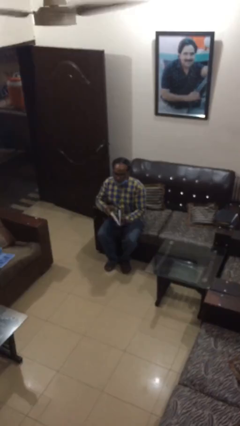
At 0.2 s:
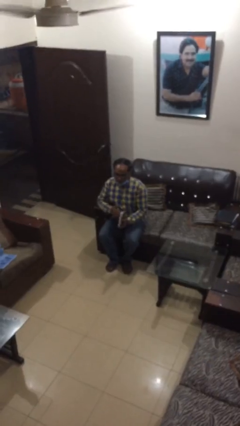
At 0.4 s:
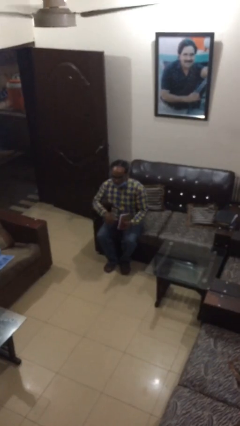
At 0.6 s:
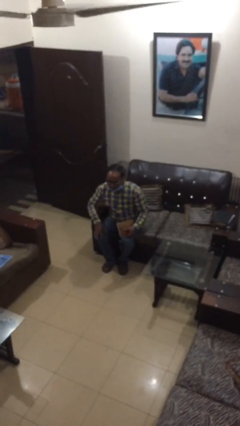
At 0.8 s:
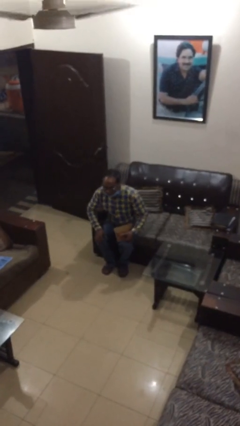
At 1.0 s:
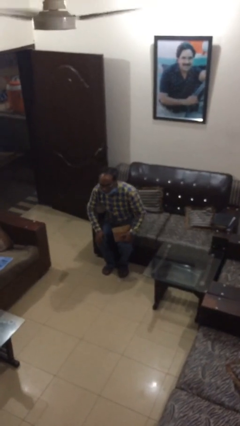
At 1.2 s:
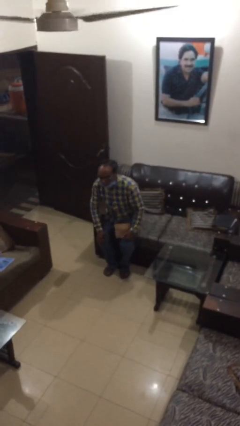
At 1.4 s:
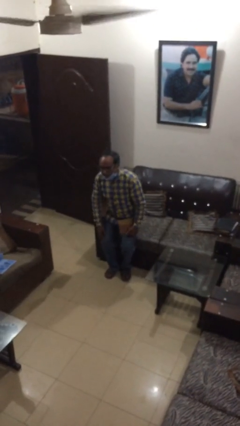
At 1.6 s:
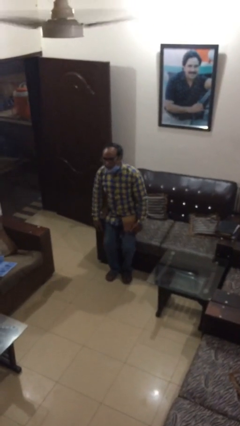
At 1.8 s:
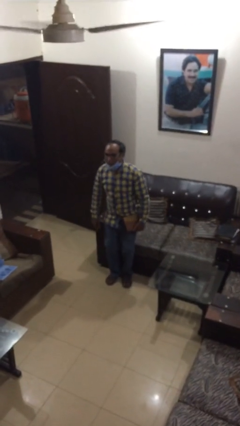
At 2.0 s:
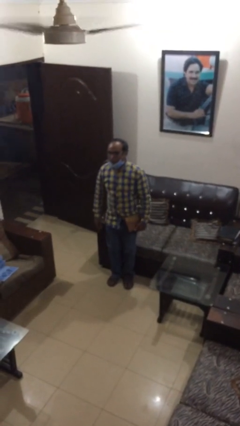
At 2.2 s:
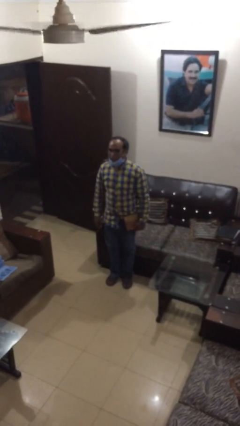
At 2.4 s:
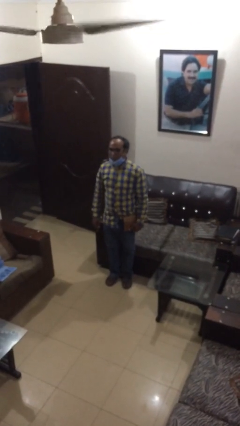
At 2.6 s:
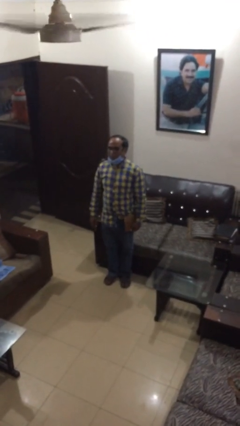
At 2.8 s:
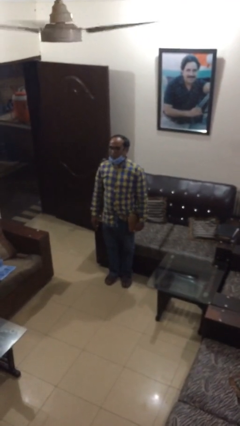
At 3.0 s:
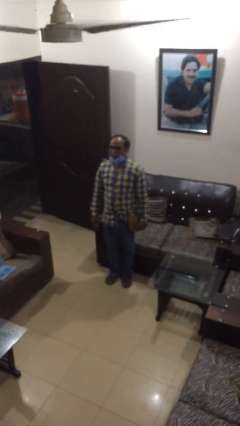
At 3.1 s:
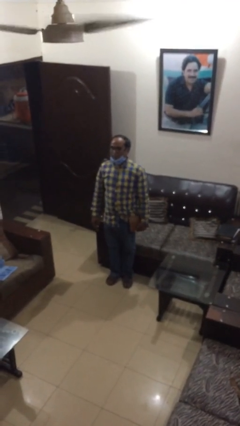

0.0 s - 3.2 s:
person stands up

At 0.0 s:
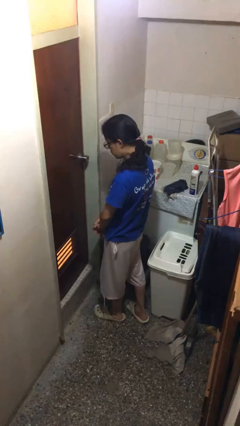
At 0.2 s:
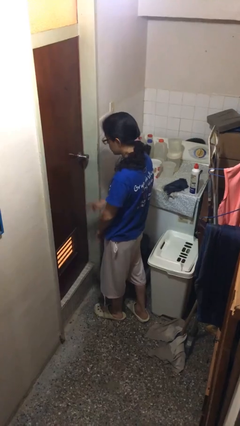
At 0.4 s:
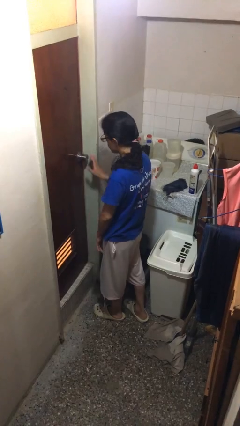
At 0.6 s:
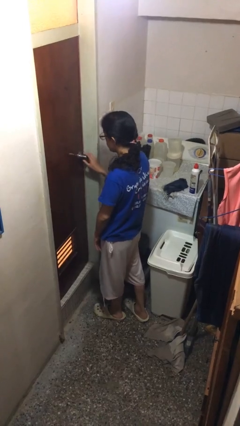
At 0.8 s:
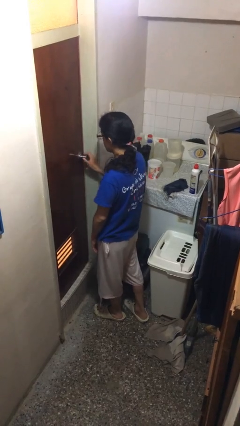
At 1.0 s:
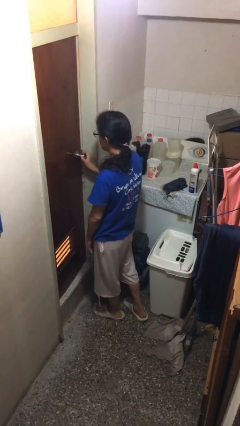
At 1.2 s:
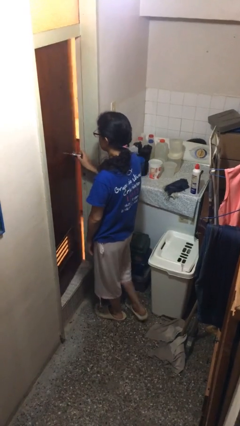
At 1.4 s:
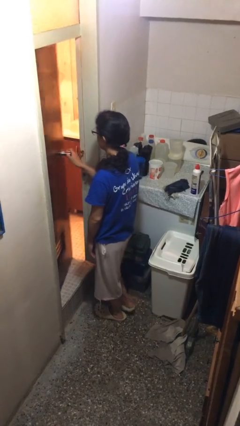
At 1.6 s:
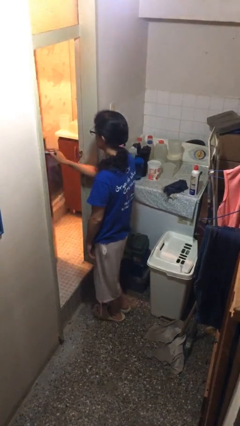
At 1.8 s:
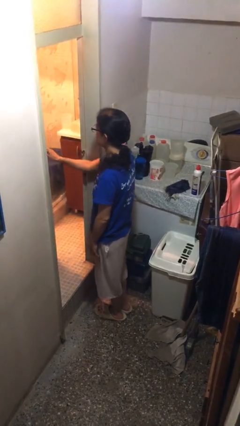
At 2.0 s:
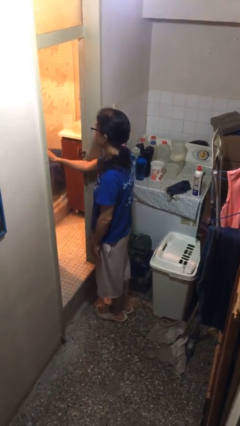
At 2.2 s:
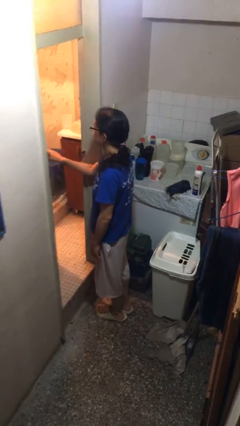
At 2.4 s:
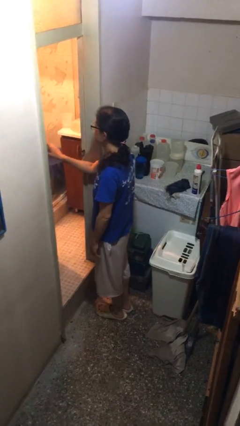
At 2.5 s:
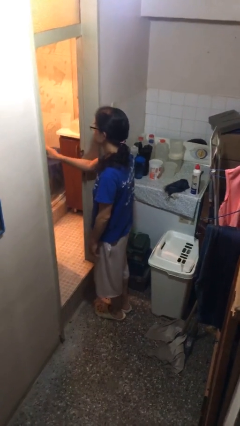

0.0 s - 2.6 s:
person opens facility door

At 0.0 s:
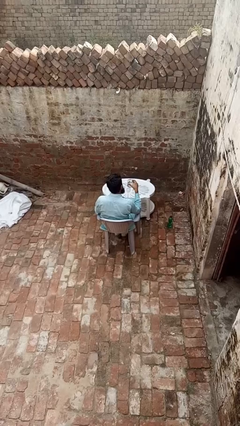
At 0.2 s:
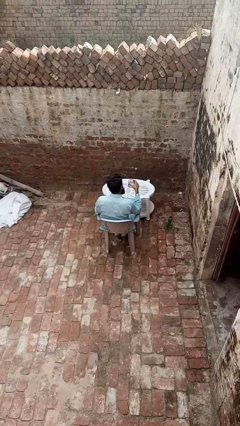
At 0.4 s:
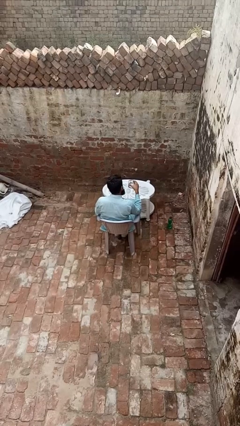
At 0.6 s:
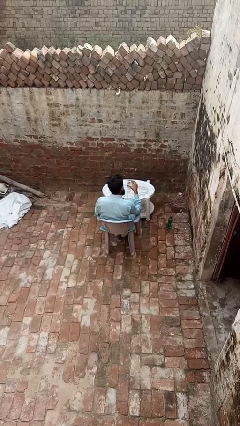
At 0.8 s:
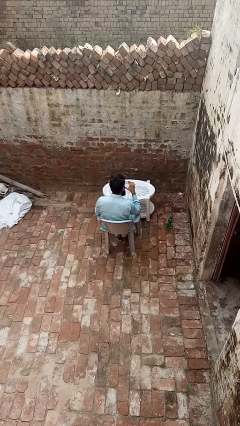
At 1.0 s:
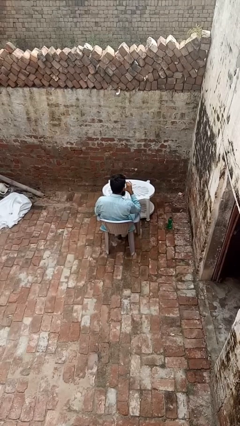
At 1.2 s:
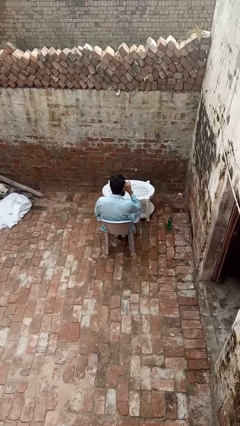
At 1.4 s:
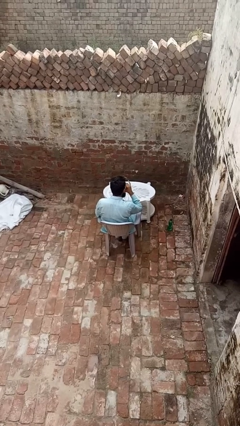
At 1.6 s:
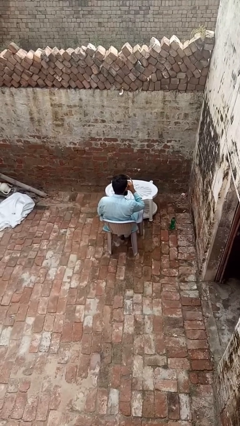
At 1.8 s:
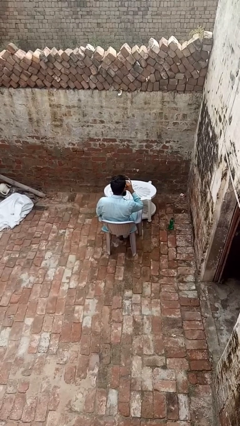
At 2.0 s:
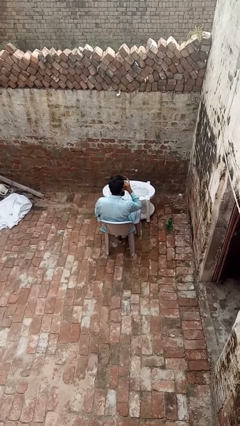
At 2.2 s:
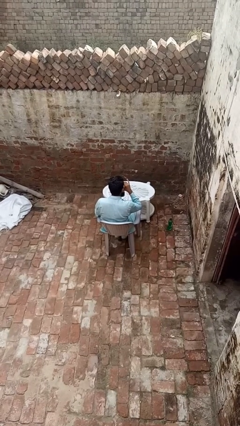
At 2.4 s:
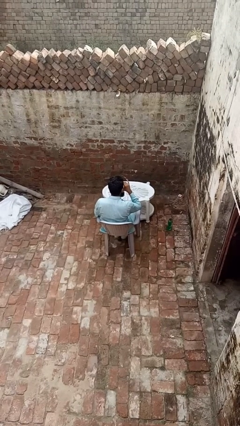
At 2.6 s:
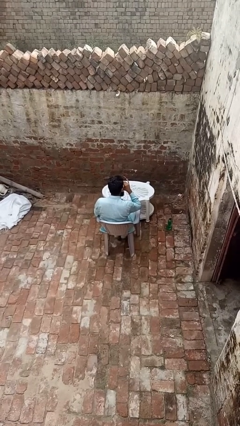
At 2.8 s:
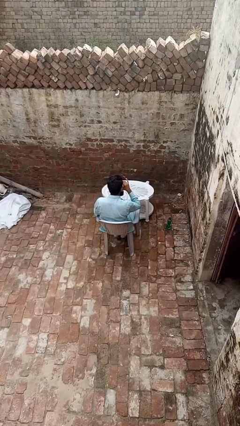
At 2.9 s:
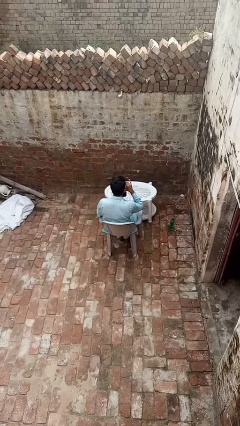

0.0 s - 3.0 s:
person drinks from shotglass

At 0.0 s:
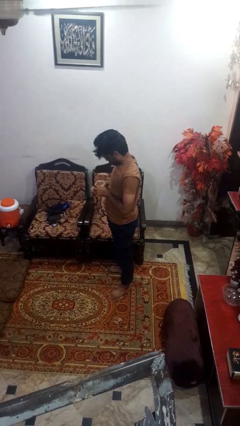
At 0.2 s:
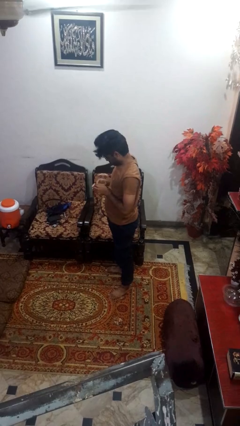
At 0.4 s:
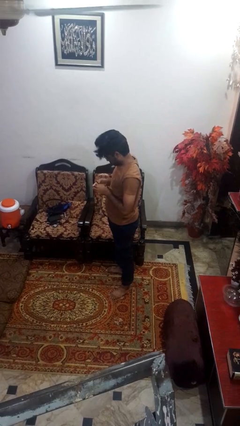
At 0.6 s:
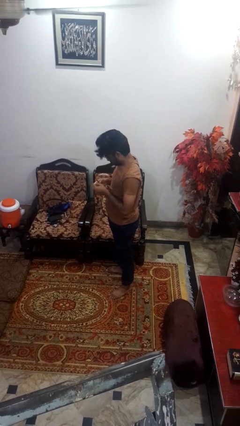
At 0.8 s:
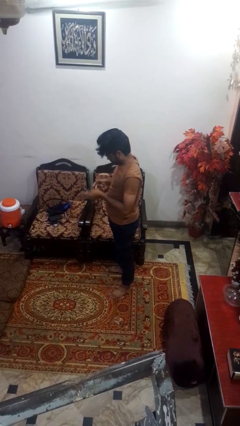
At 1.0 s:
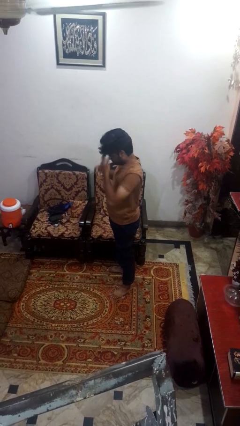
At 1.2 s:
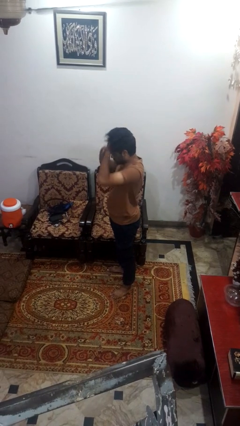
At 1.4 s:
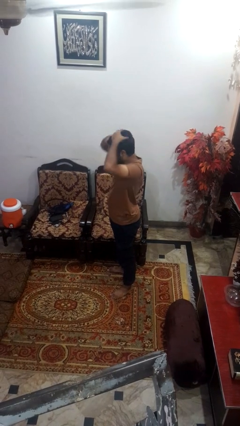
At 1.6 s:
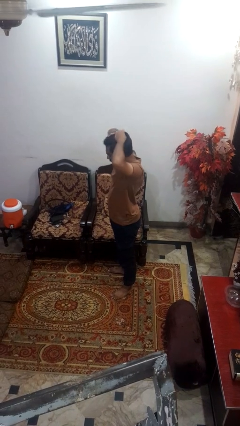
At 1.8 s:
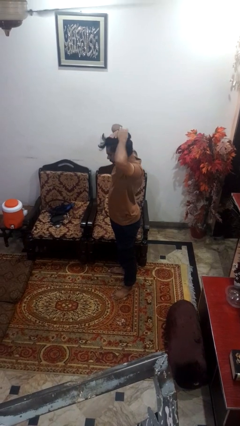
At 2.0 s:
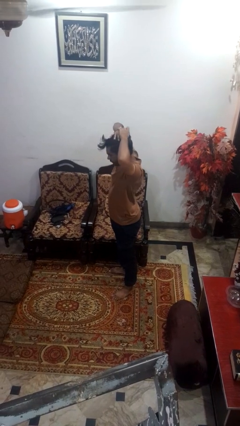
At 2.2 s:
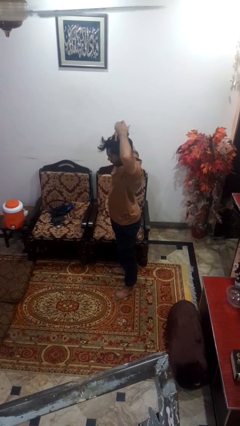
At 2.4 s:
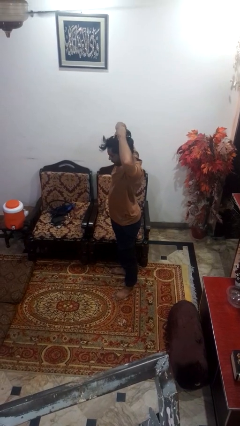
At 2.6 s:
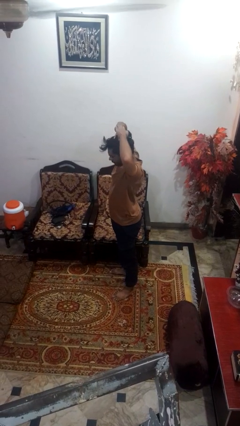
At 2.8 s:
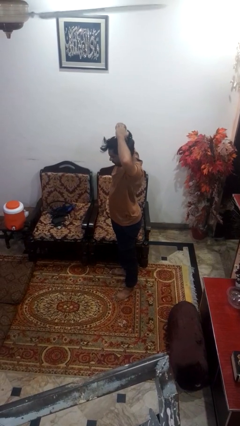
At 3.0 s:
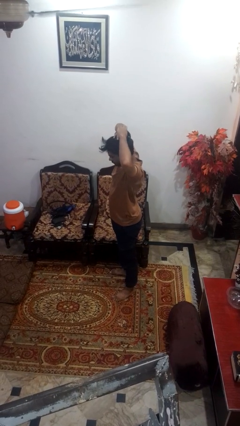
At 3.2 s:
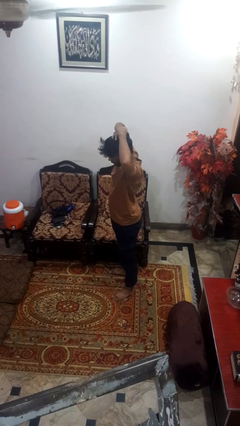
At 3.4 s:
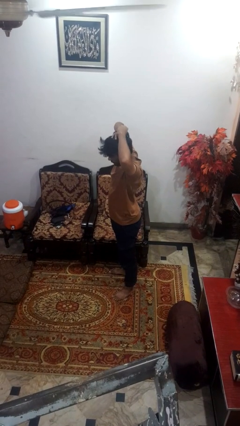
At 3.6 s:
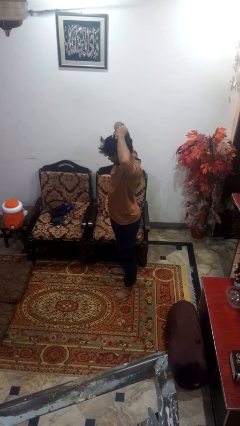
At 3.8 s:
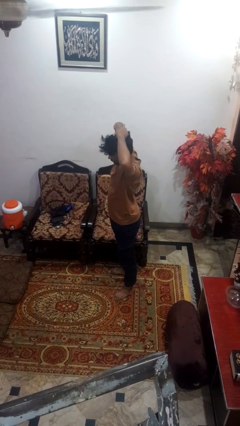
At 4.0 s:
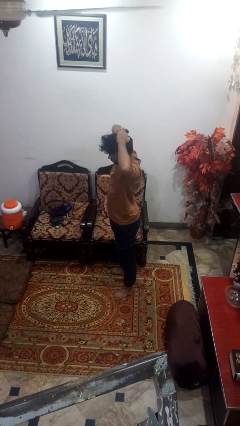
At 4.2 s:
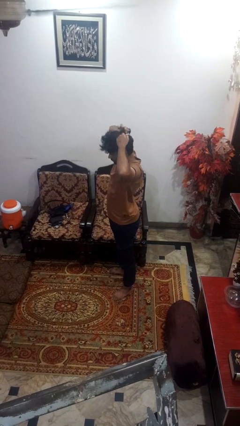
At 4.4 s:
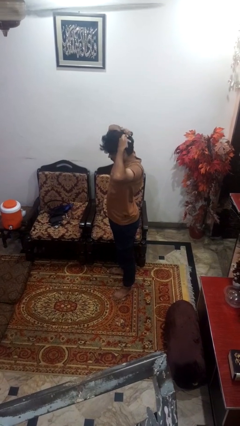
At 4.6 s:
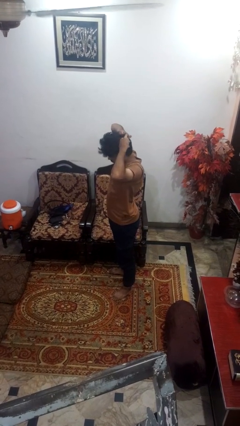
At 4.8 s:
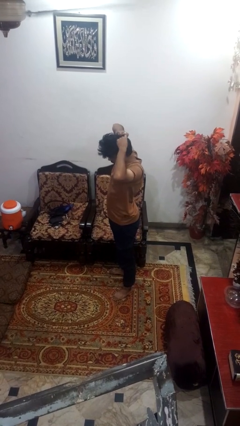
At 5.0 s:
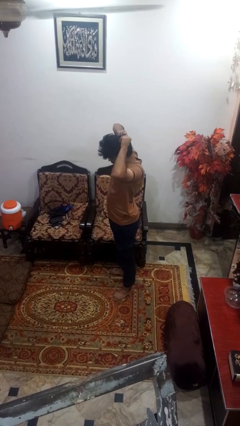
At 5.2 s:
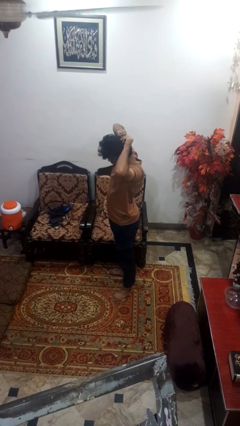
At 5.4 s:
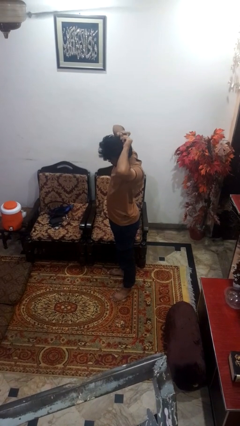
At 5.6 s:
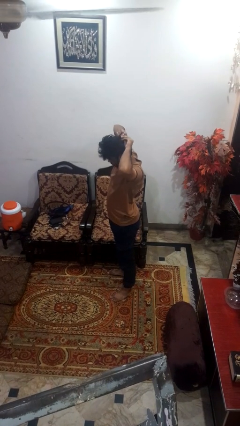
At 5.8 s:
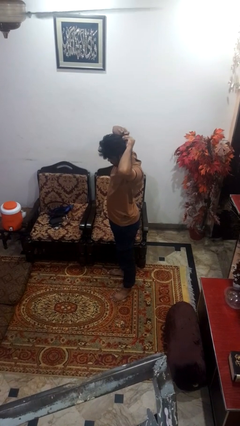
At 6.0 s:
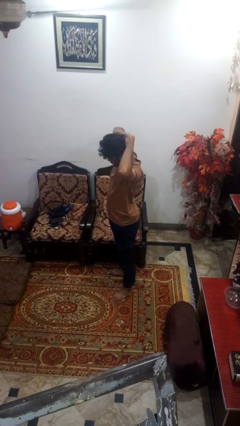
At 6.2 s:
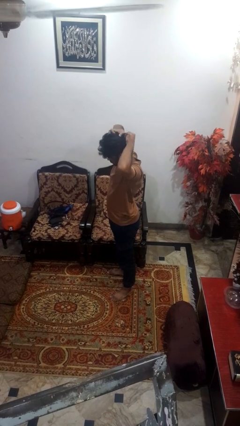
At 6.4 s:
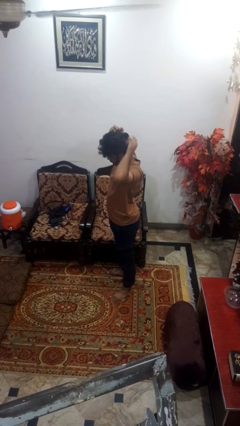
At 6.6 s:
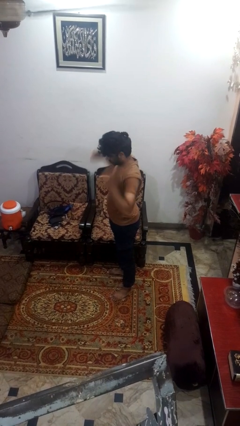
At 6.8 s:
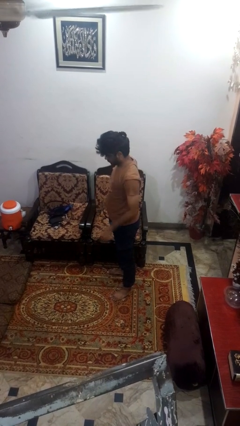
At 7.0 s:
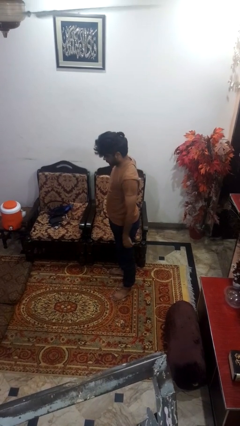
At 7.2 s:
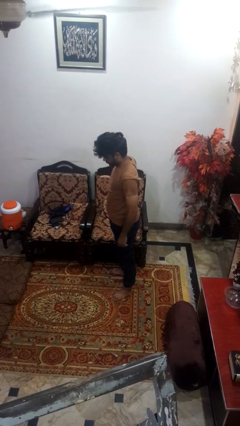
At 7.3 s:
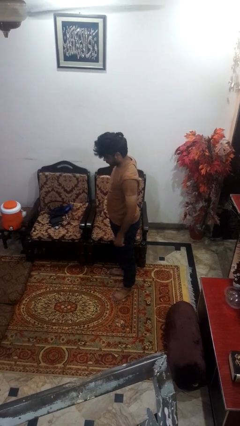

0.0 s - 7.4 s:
person puts hair in ponytail

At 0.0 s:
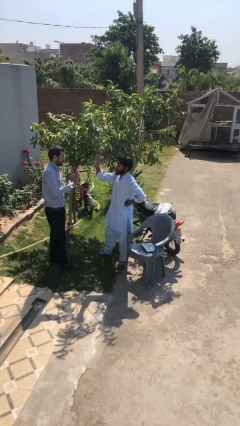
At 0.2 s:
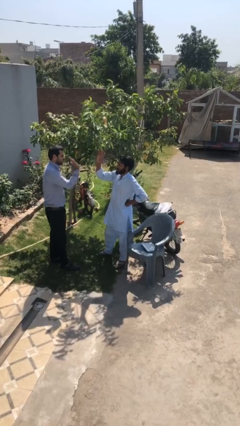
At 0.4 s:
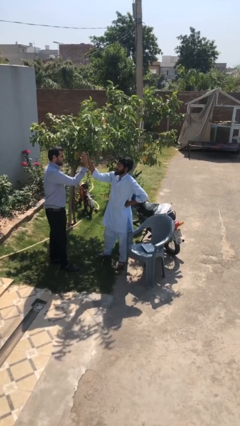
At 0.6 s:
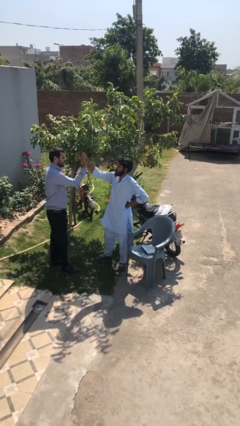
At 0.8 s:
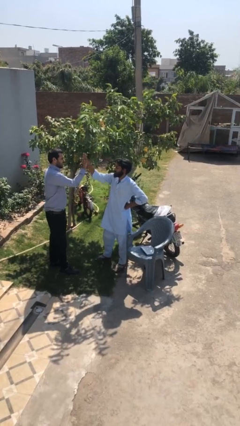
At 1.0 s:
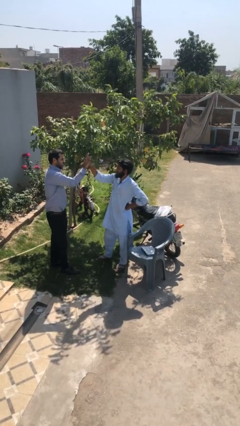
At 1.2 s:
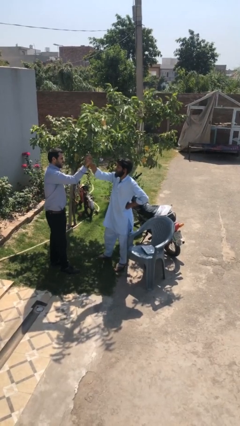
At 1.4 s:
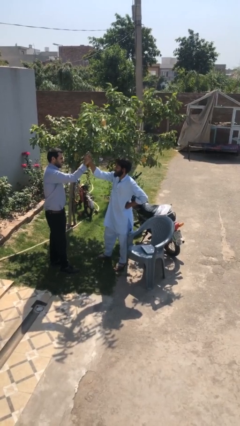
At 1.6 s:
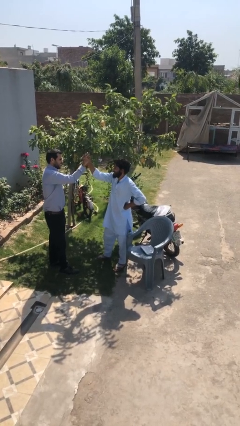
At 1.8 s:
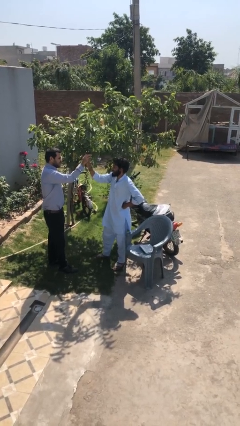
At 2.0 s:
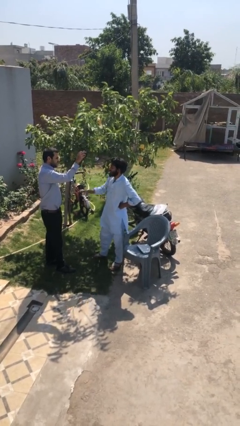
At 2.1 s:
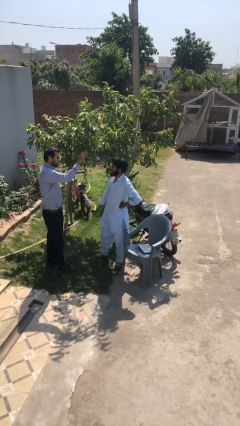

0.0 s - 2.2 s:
person highfives hand
